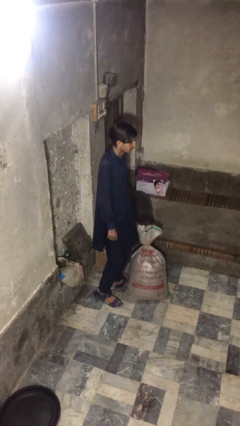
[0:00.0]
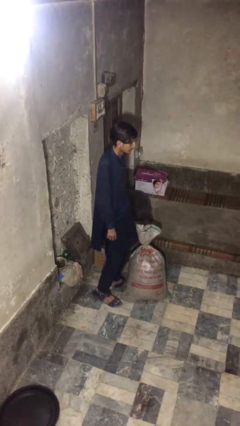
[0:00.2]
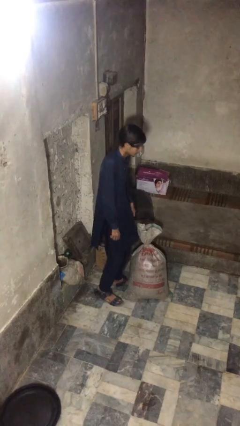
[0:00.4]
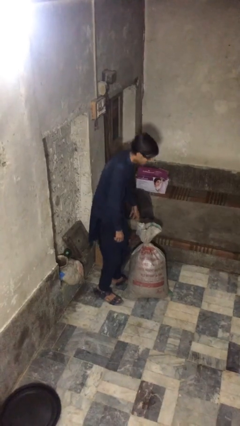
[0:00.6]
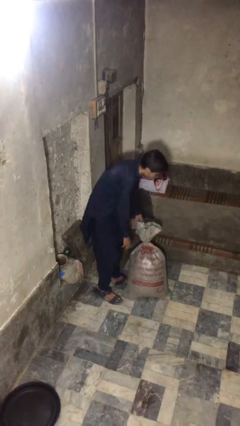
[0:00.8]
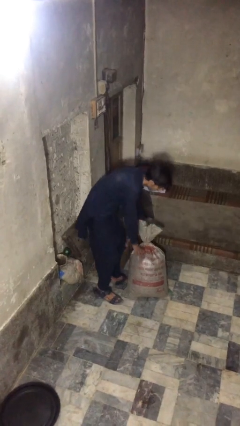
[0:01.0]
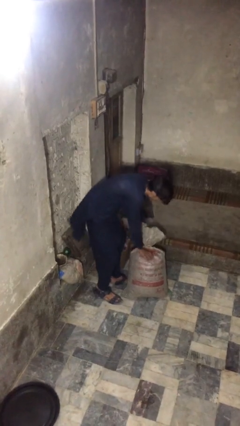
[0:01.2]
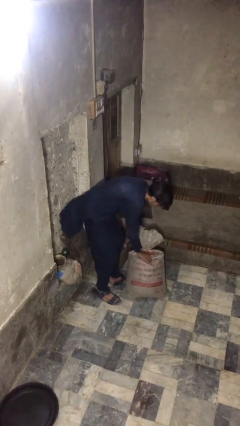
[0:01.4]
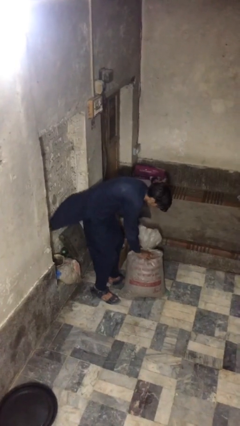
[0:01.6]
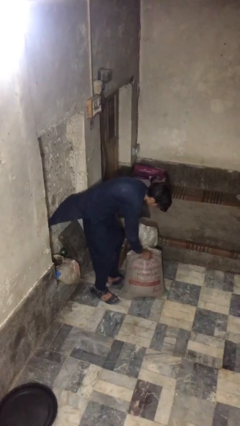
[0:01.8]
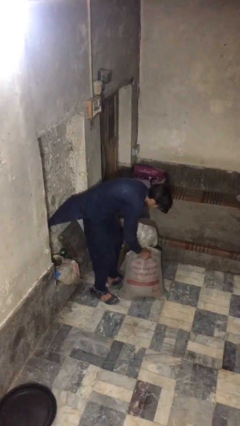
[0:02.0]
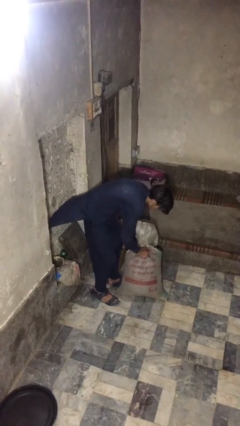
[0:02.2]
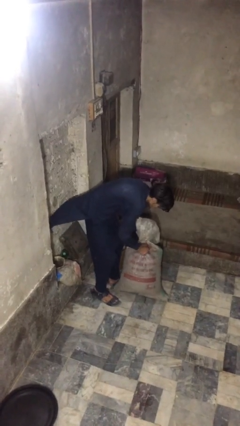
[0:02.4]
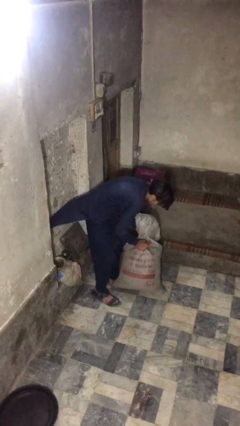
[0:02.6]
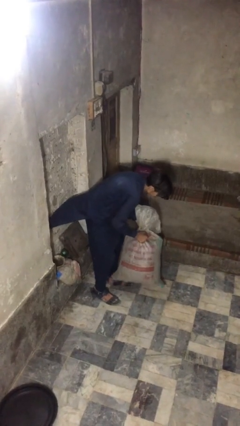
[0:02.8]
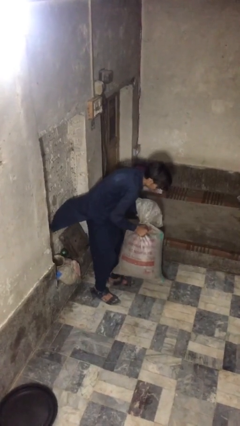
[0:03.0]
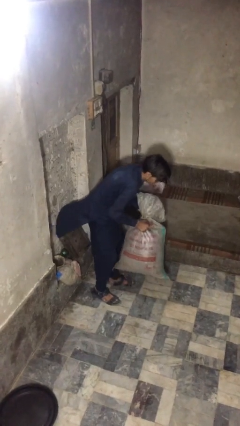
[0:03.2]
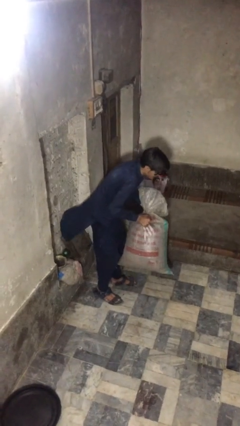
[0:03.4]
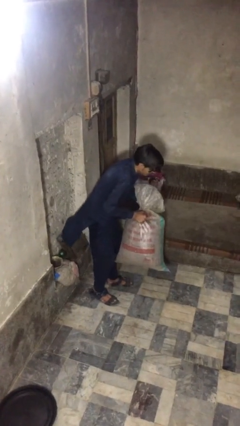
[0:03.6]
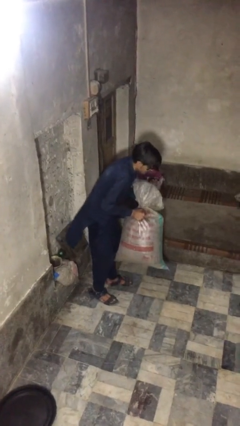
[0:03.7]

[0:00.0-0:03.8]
person picks up object from floor

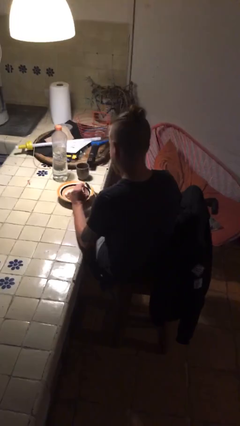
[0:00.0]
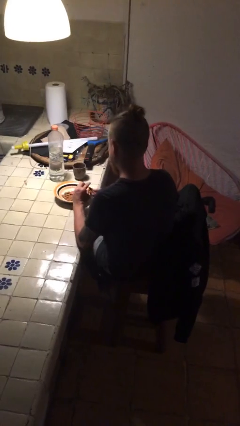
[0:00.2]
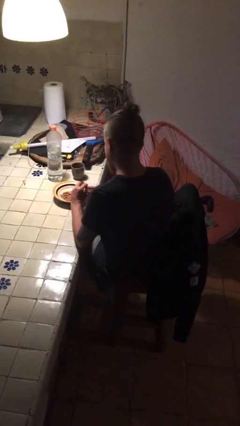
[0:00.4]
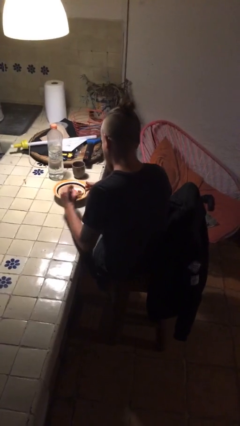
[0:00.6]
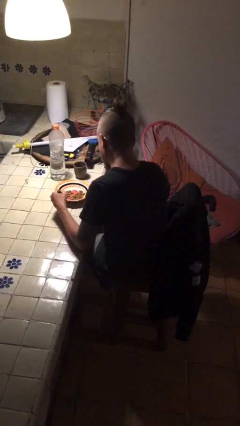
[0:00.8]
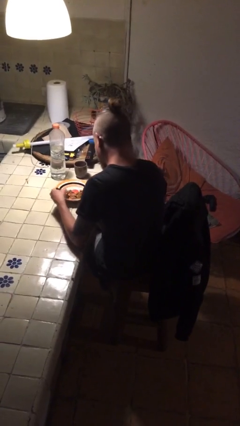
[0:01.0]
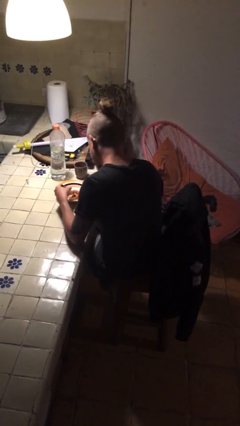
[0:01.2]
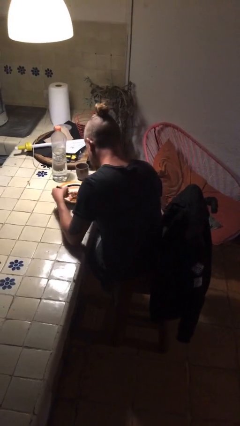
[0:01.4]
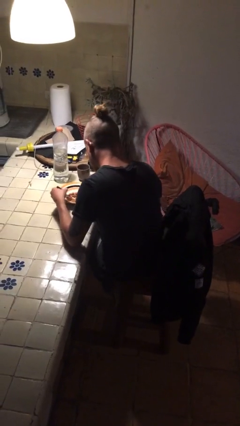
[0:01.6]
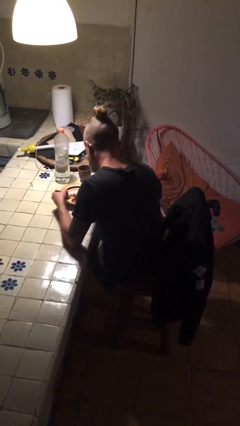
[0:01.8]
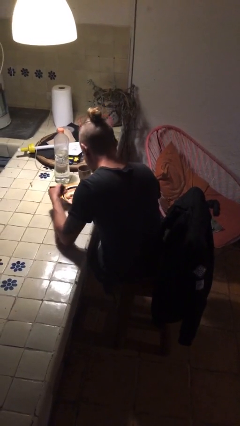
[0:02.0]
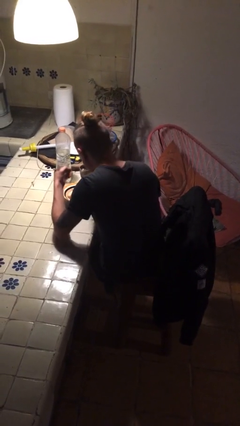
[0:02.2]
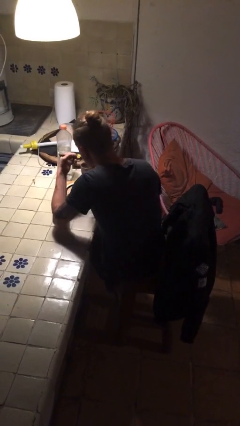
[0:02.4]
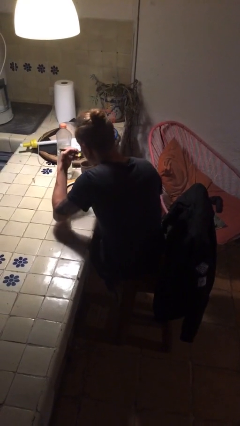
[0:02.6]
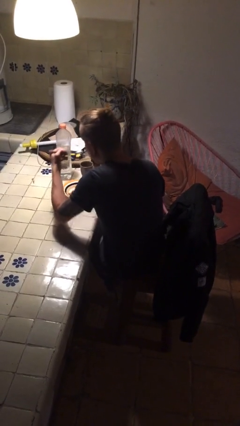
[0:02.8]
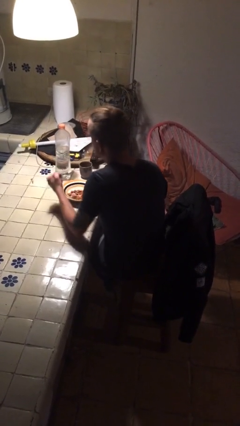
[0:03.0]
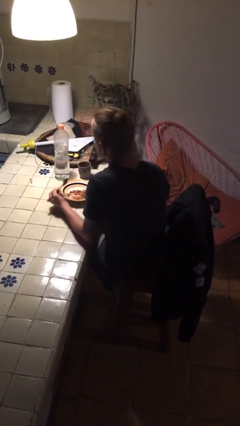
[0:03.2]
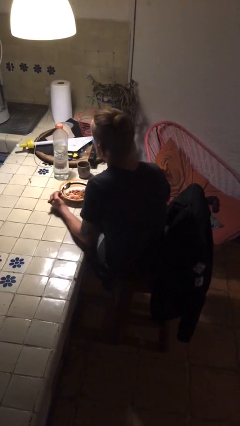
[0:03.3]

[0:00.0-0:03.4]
person eats with utensil

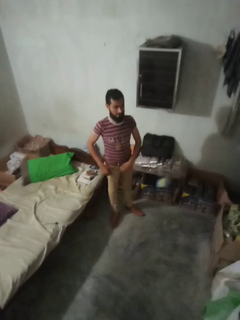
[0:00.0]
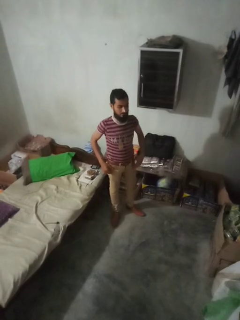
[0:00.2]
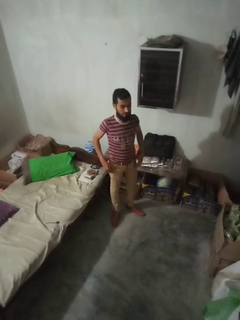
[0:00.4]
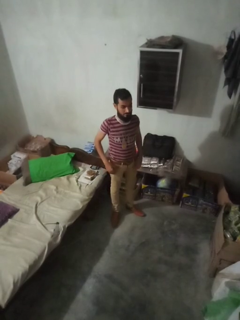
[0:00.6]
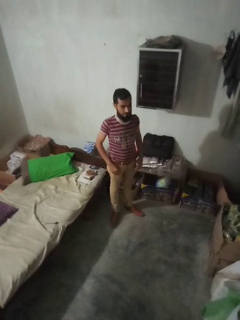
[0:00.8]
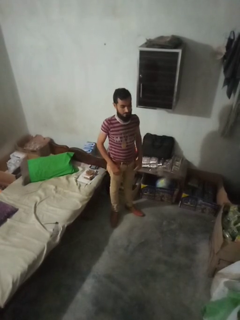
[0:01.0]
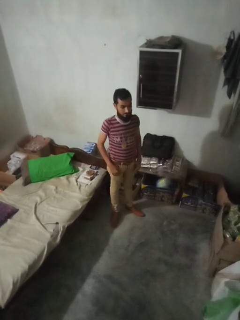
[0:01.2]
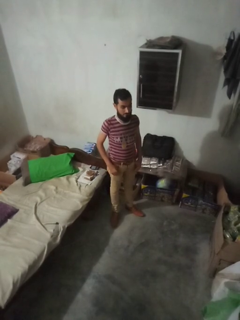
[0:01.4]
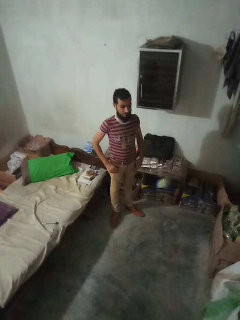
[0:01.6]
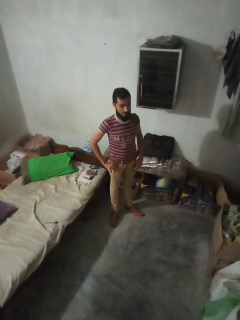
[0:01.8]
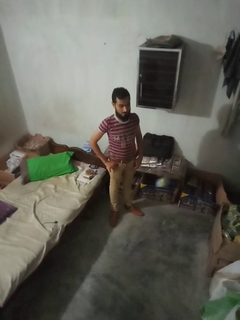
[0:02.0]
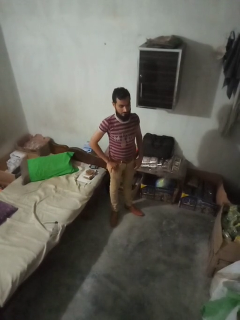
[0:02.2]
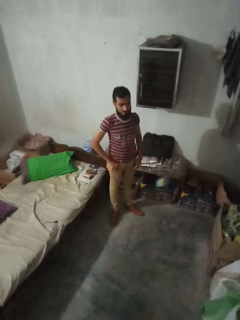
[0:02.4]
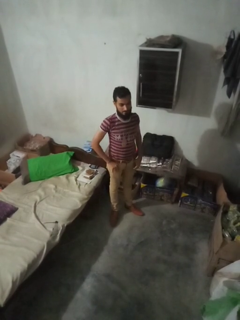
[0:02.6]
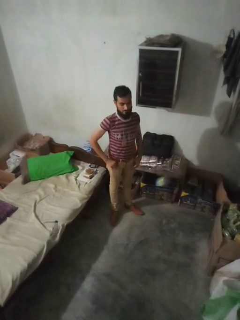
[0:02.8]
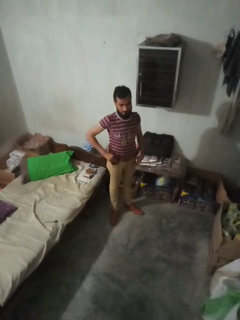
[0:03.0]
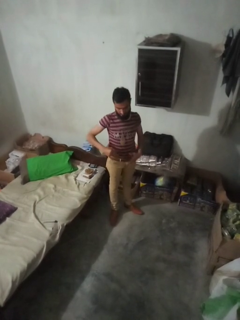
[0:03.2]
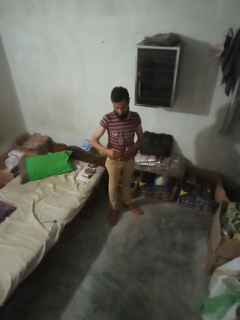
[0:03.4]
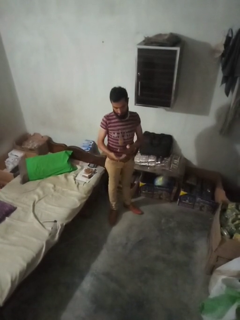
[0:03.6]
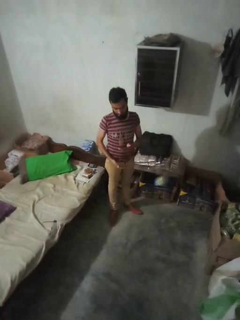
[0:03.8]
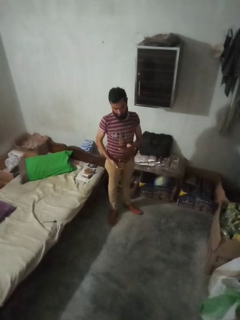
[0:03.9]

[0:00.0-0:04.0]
person takes phone from pocket

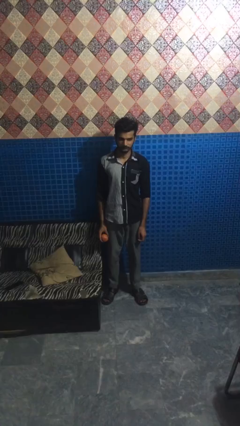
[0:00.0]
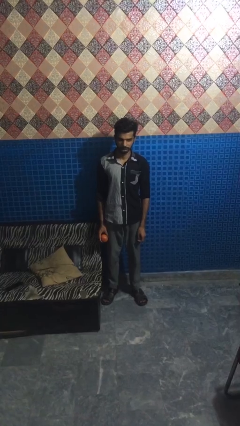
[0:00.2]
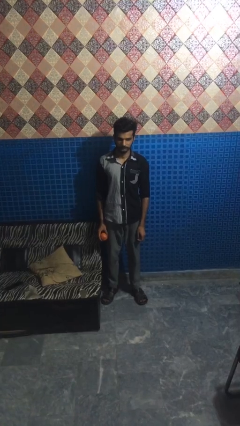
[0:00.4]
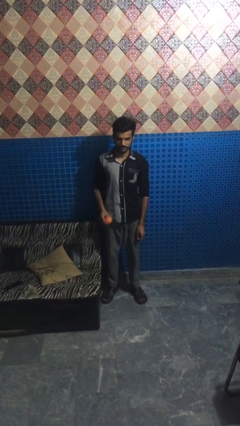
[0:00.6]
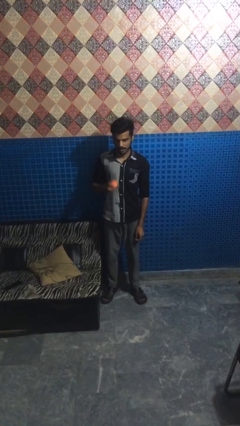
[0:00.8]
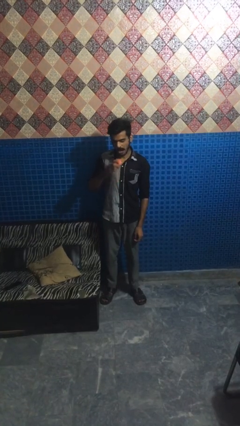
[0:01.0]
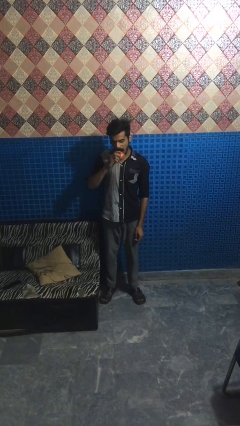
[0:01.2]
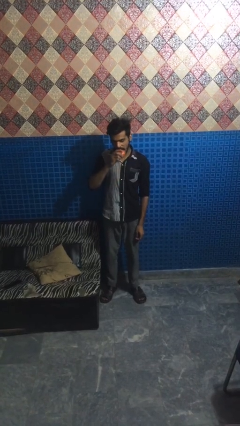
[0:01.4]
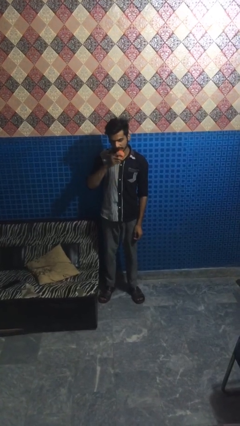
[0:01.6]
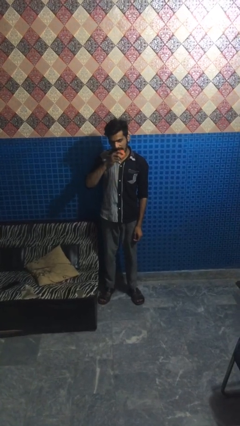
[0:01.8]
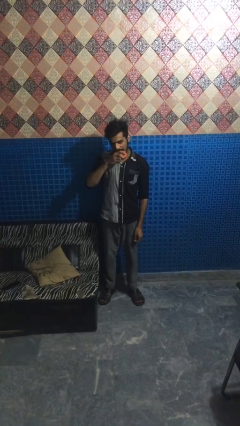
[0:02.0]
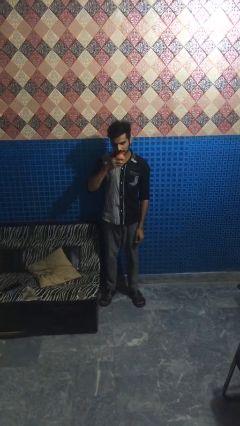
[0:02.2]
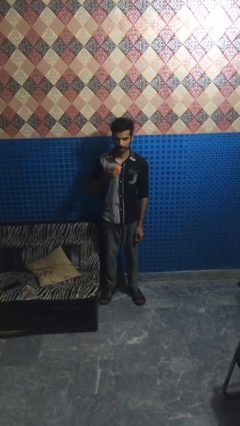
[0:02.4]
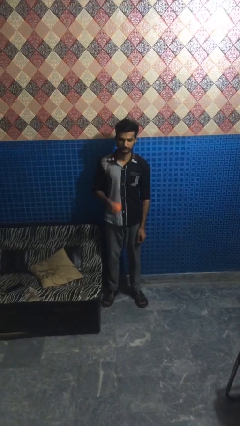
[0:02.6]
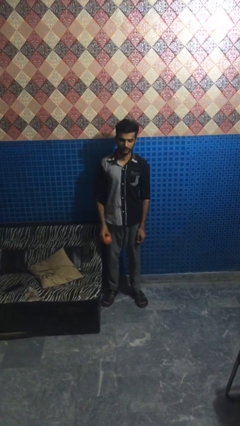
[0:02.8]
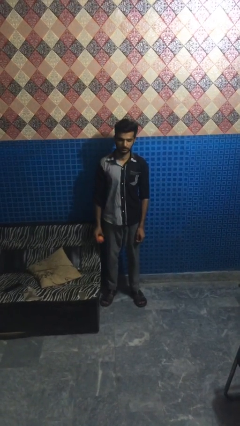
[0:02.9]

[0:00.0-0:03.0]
person eats apple

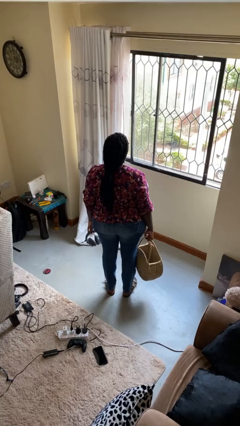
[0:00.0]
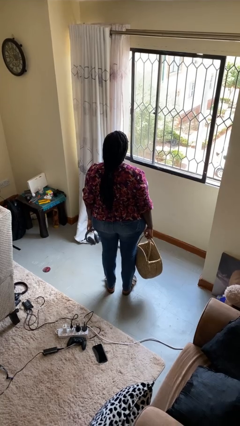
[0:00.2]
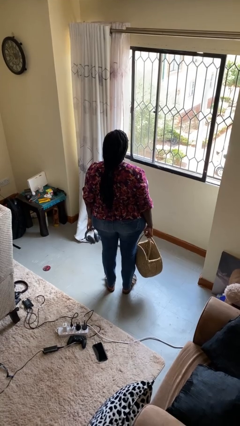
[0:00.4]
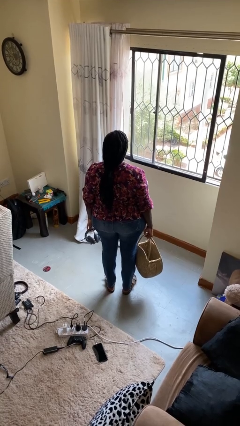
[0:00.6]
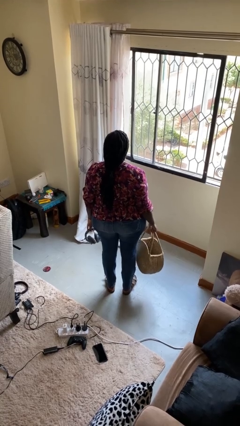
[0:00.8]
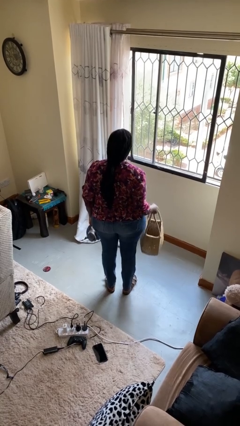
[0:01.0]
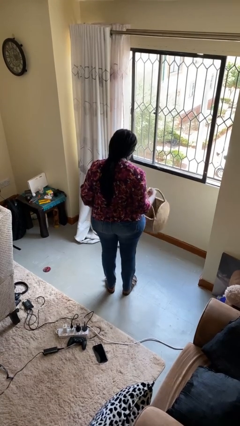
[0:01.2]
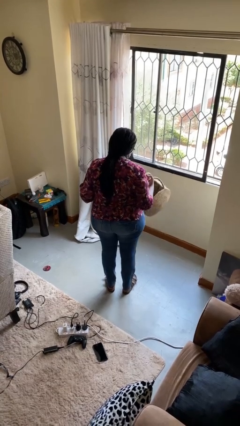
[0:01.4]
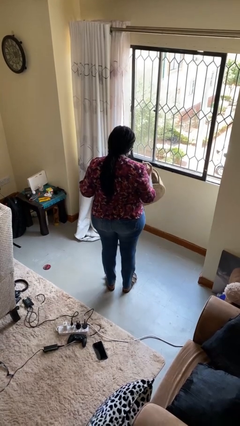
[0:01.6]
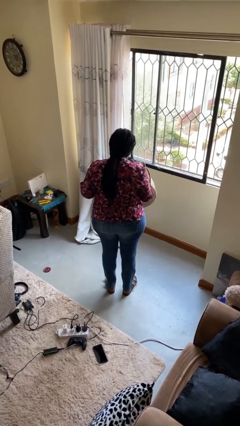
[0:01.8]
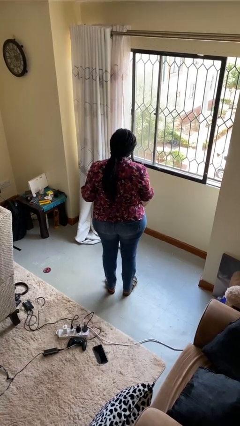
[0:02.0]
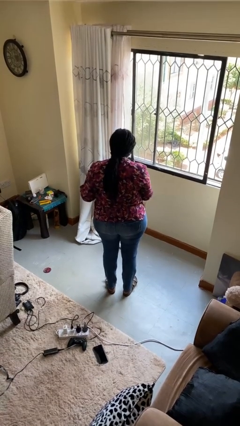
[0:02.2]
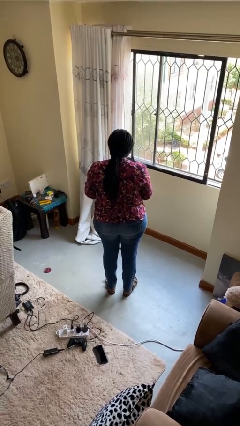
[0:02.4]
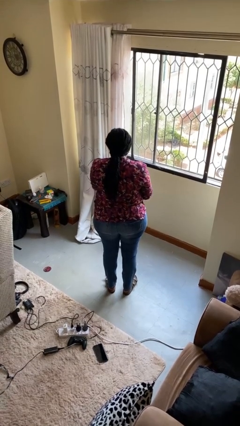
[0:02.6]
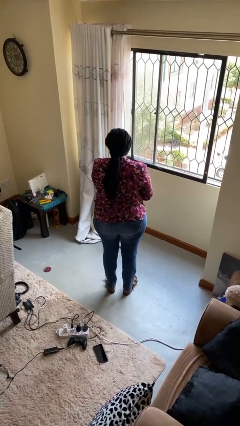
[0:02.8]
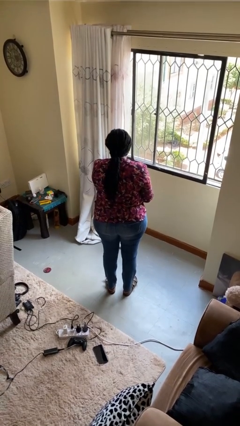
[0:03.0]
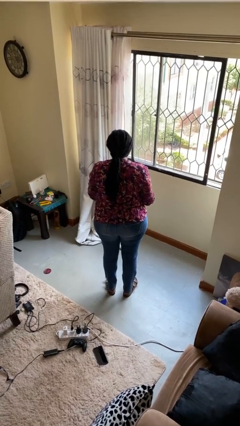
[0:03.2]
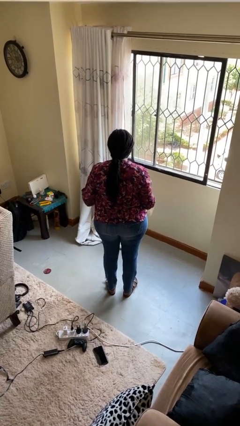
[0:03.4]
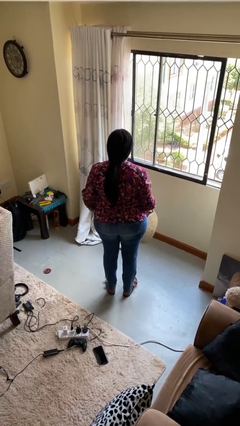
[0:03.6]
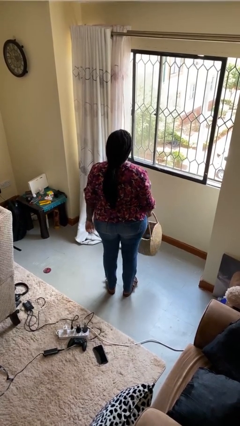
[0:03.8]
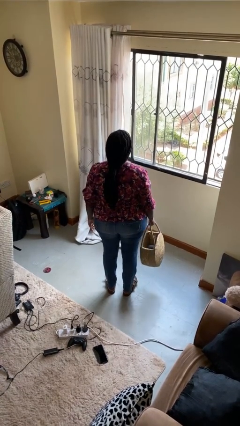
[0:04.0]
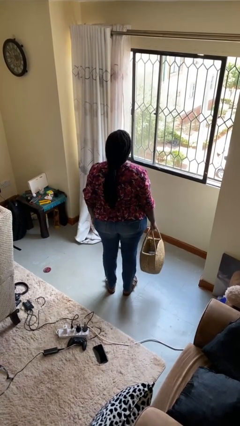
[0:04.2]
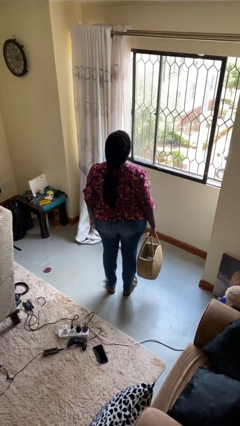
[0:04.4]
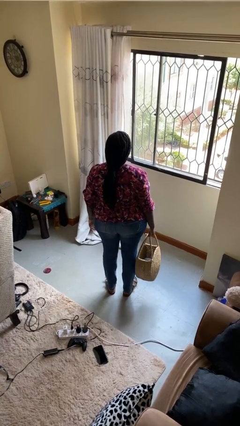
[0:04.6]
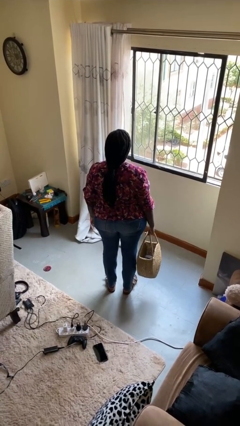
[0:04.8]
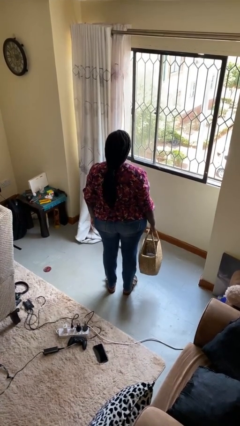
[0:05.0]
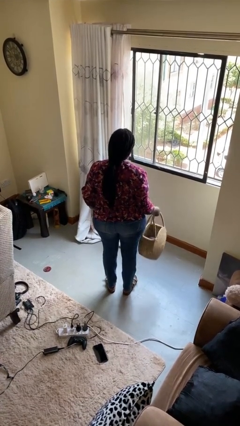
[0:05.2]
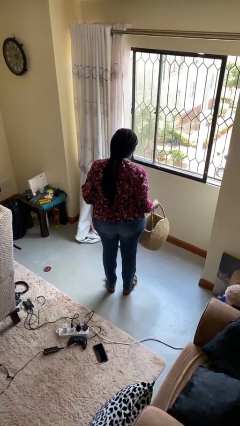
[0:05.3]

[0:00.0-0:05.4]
person puts object into basket
